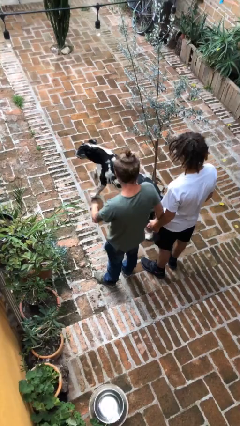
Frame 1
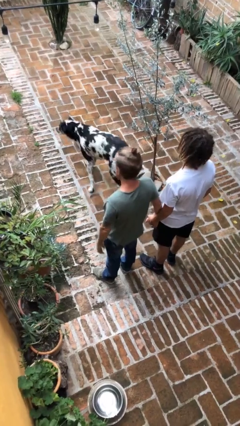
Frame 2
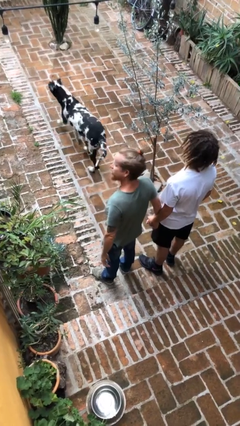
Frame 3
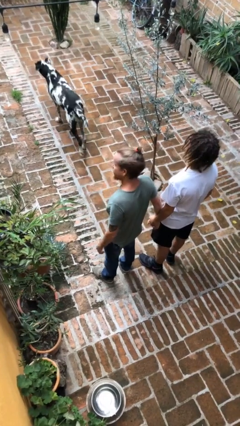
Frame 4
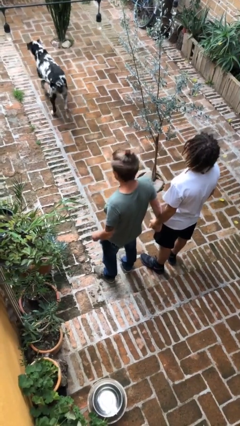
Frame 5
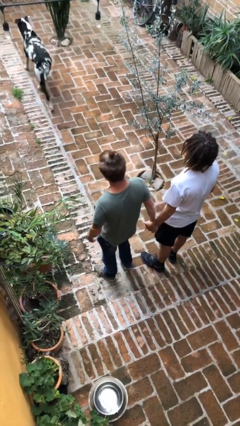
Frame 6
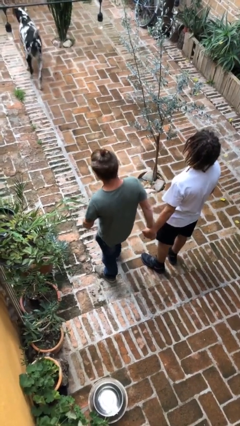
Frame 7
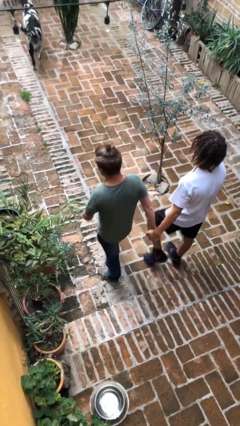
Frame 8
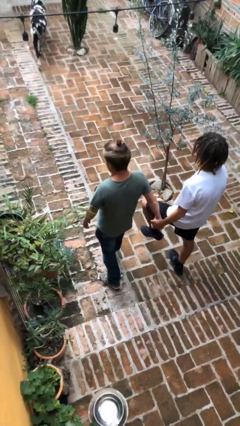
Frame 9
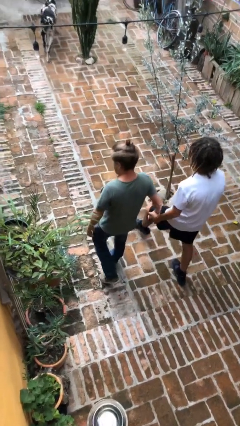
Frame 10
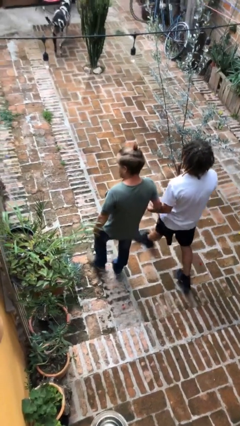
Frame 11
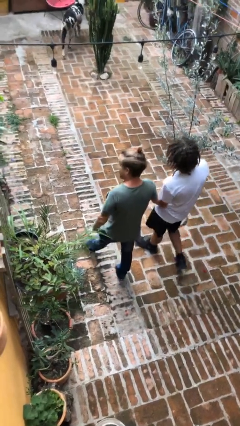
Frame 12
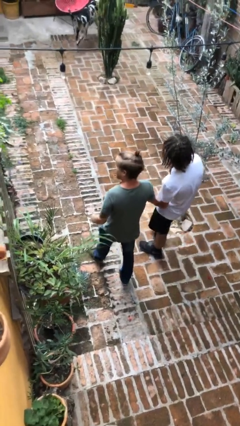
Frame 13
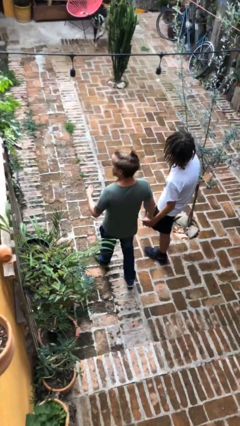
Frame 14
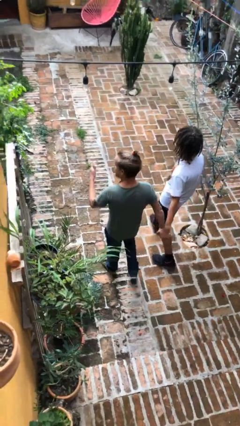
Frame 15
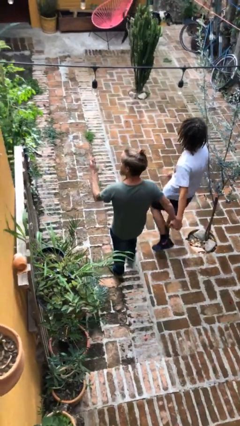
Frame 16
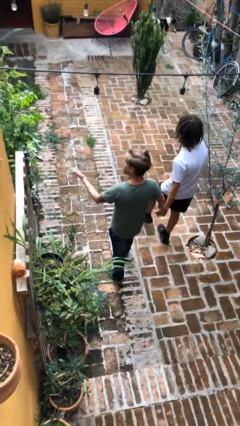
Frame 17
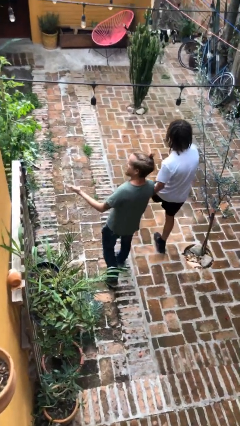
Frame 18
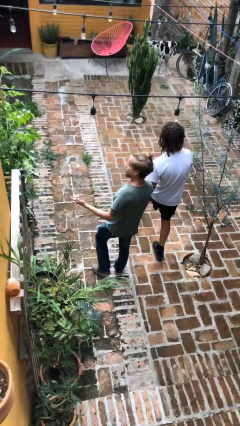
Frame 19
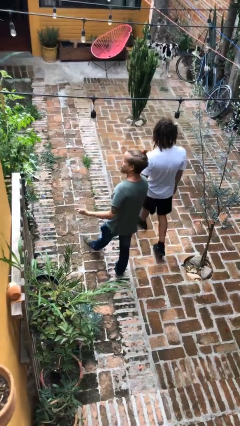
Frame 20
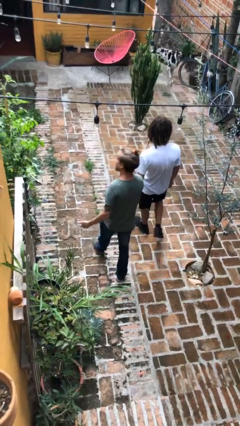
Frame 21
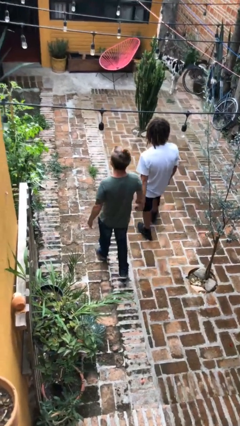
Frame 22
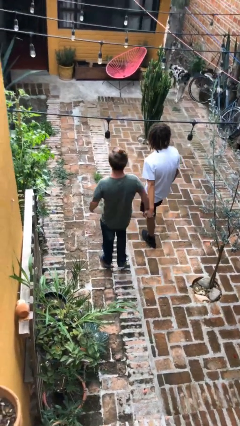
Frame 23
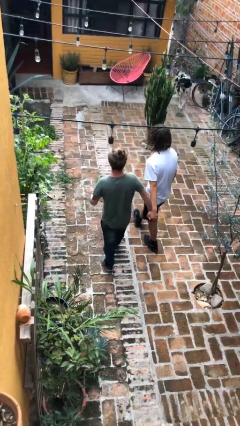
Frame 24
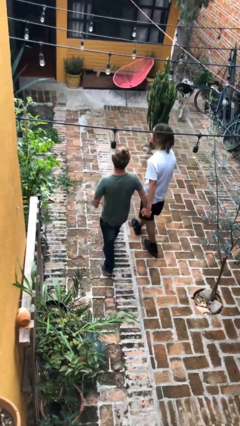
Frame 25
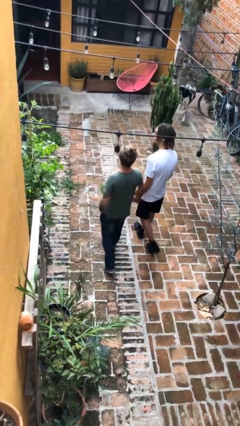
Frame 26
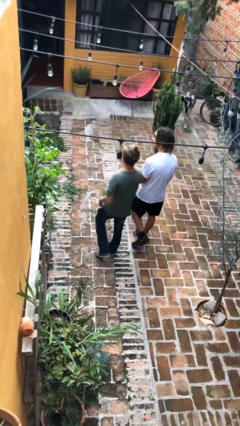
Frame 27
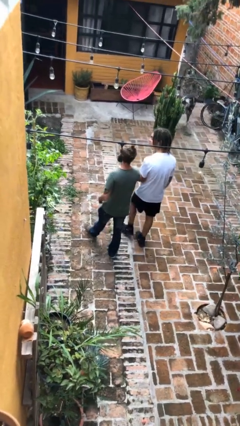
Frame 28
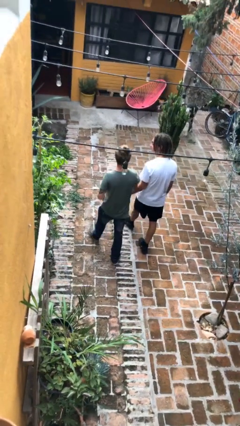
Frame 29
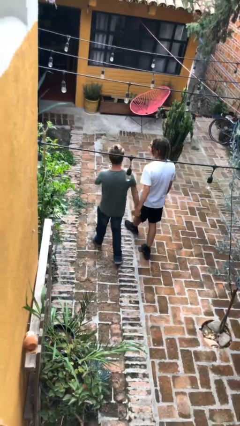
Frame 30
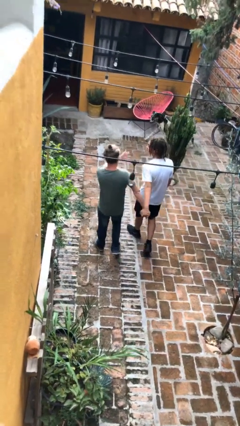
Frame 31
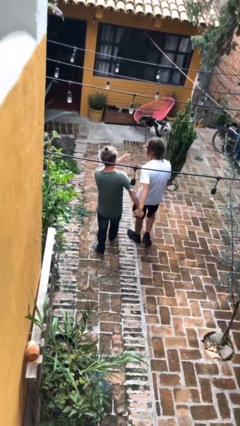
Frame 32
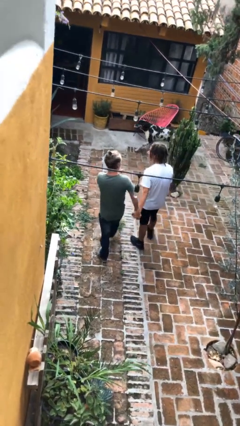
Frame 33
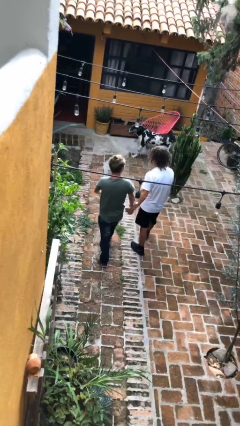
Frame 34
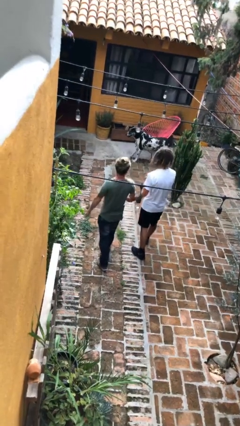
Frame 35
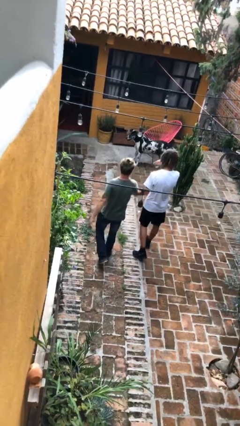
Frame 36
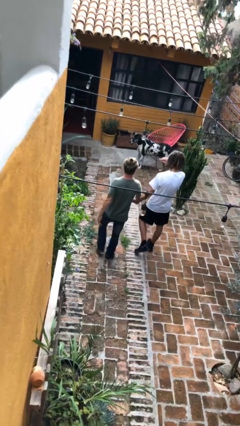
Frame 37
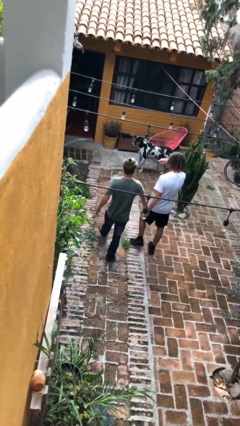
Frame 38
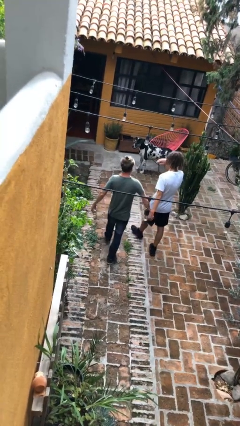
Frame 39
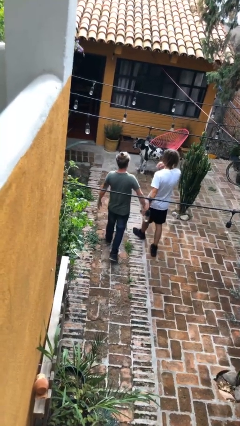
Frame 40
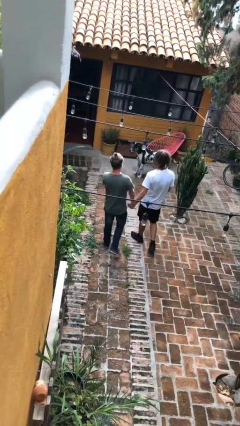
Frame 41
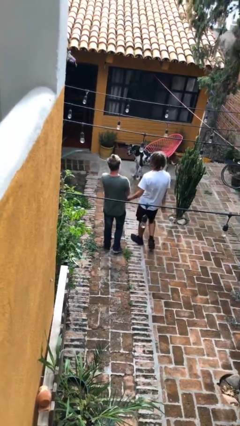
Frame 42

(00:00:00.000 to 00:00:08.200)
person holds hand

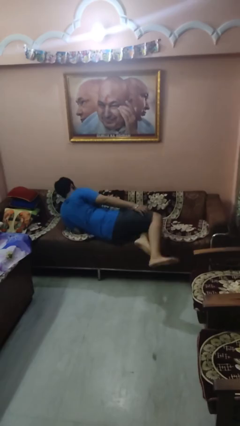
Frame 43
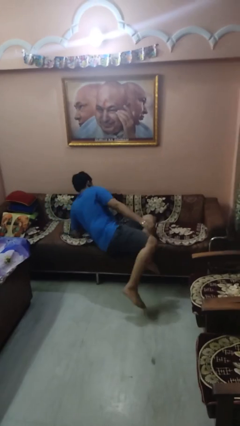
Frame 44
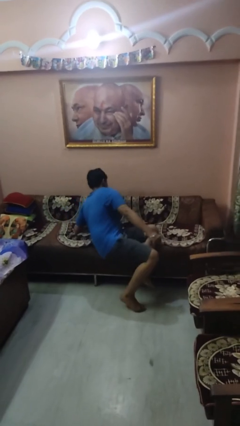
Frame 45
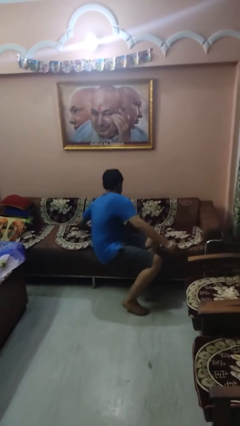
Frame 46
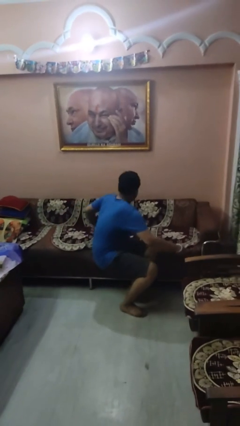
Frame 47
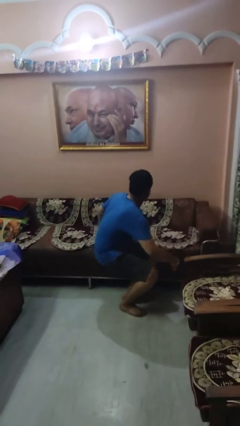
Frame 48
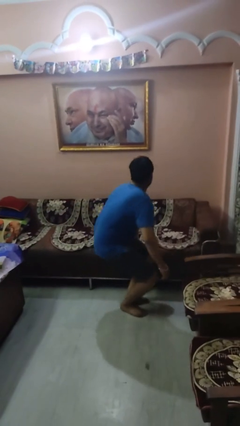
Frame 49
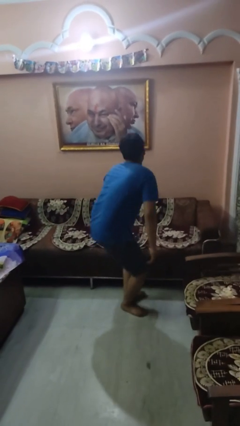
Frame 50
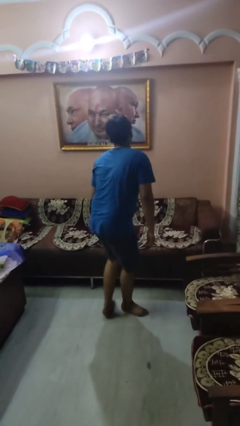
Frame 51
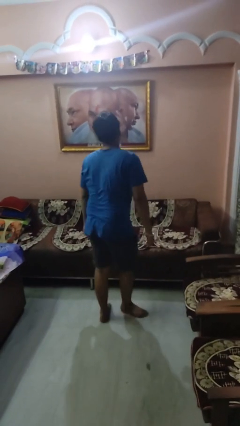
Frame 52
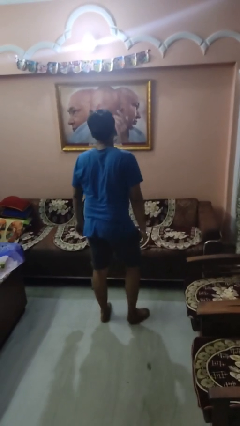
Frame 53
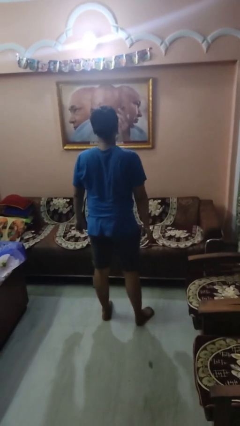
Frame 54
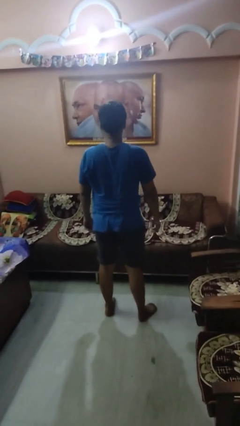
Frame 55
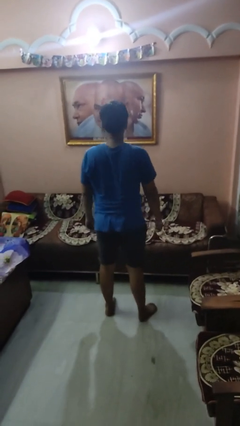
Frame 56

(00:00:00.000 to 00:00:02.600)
person stands up

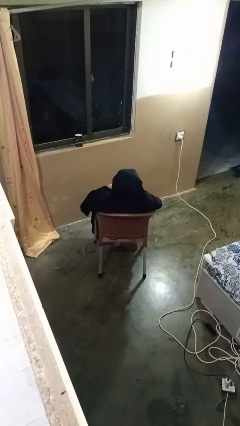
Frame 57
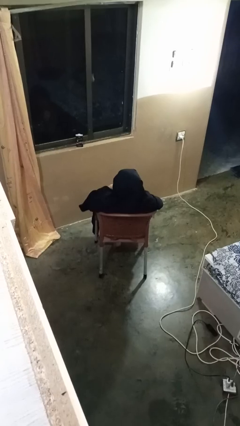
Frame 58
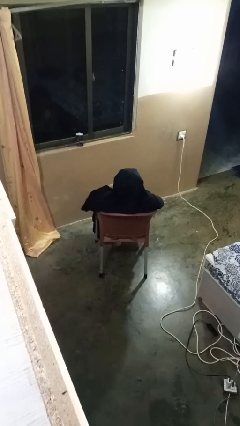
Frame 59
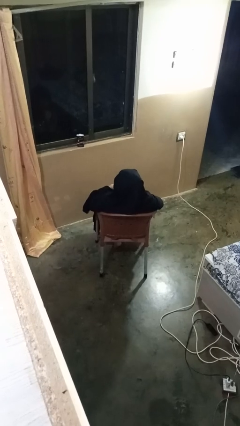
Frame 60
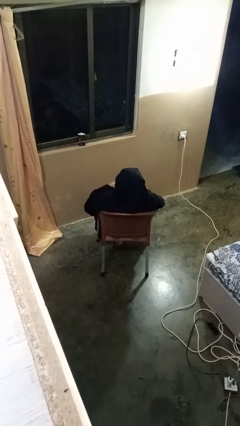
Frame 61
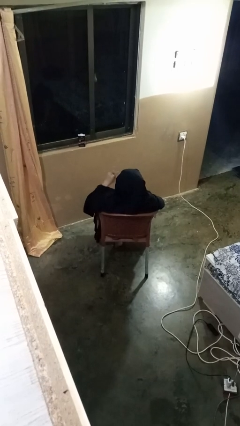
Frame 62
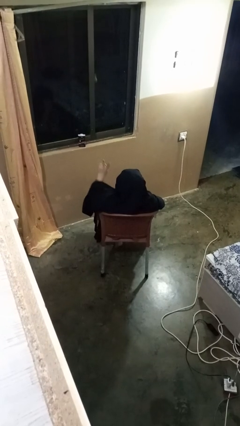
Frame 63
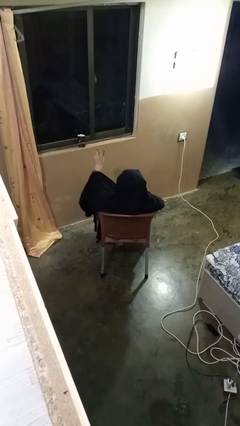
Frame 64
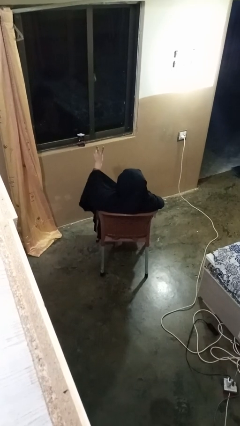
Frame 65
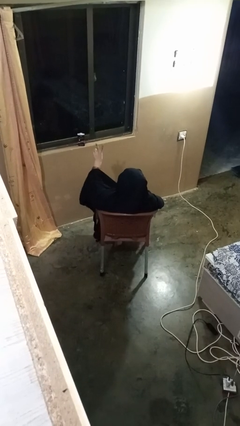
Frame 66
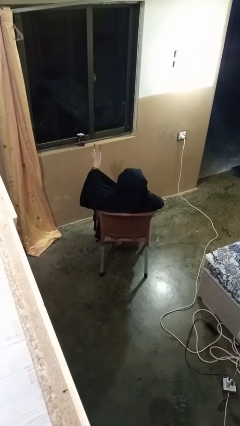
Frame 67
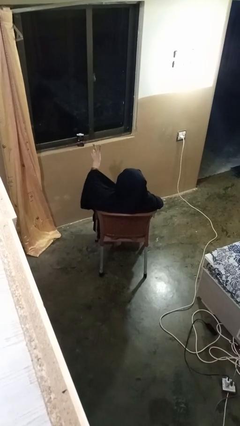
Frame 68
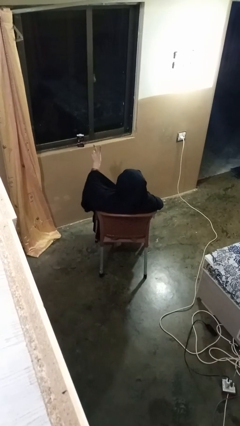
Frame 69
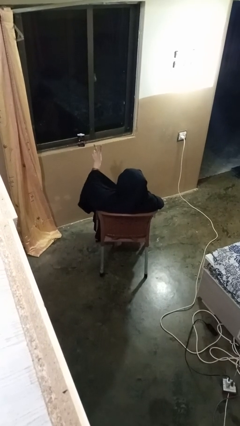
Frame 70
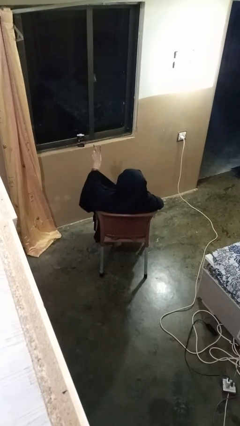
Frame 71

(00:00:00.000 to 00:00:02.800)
person gestures peace

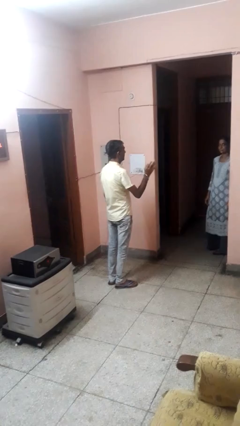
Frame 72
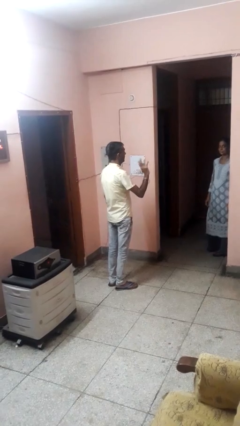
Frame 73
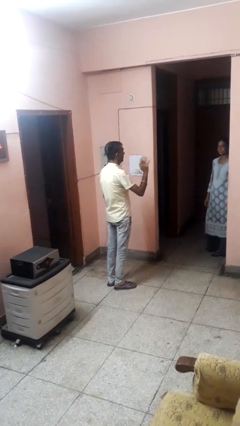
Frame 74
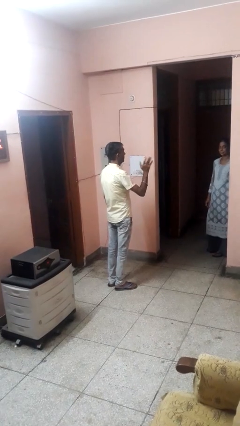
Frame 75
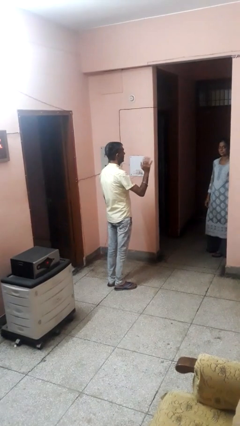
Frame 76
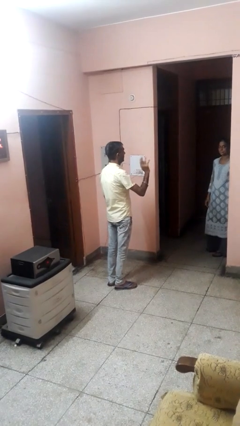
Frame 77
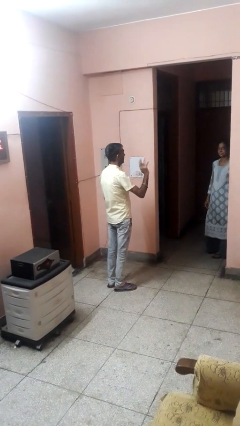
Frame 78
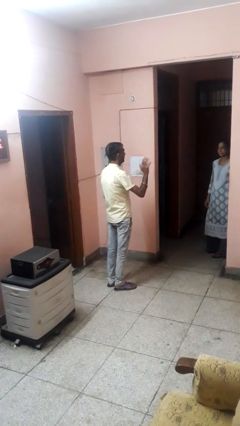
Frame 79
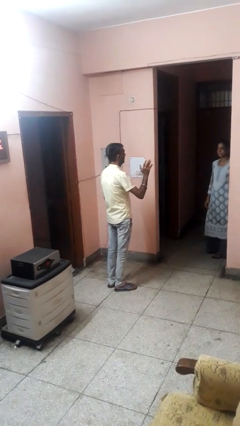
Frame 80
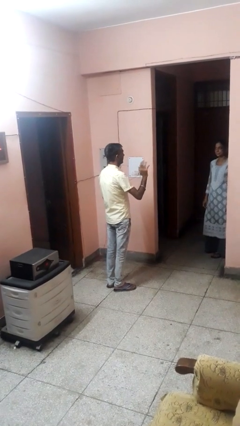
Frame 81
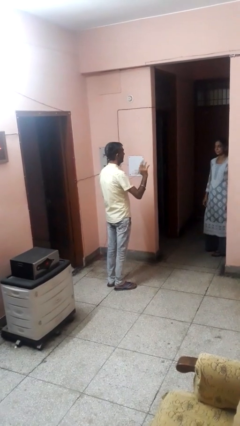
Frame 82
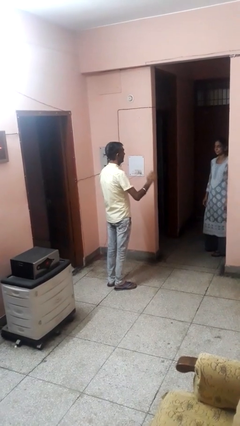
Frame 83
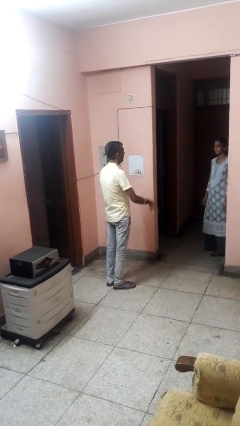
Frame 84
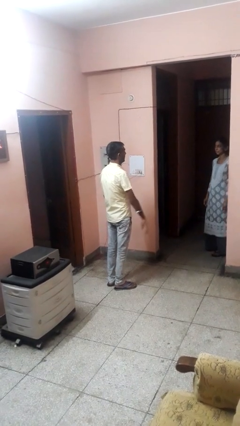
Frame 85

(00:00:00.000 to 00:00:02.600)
person waves at person

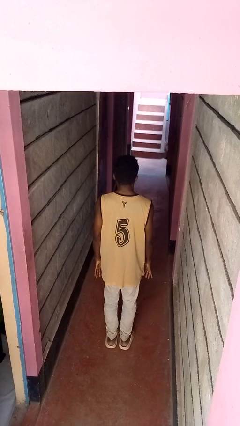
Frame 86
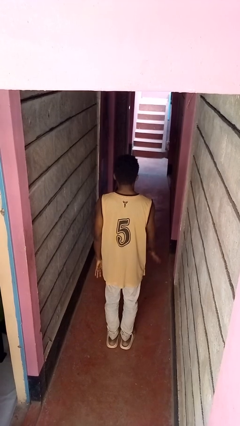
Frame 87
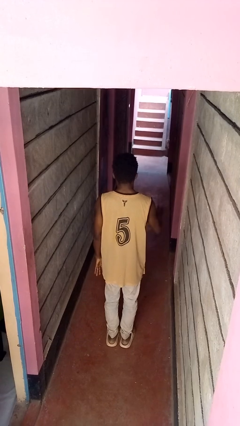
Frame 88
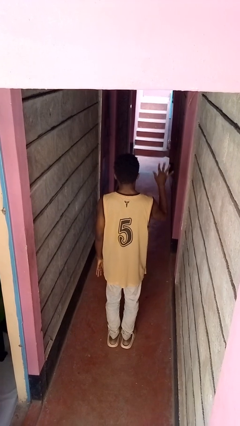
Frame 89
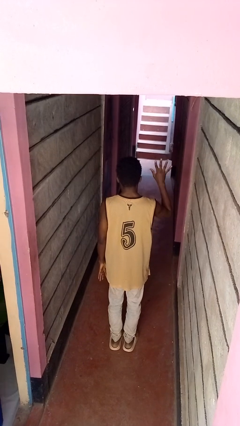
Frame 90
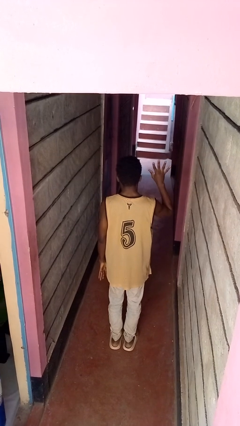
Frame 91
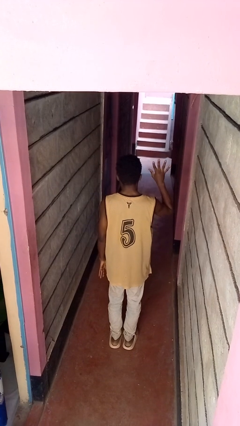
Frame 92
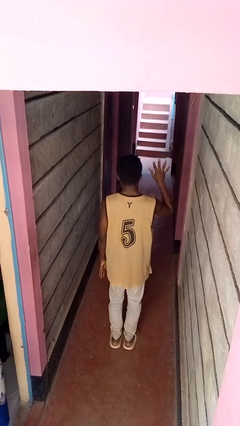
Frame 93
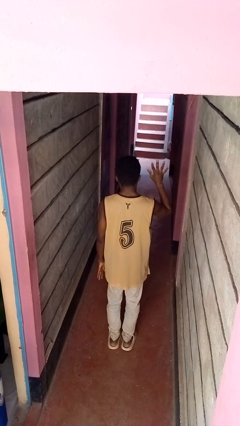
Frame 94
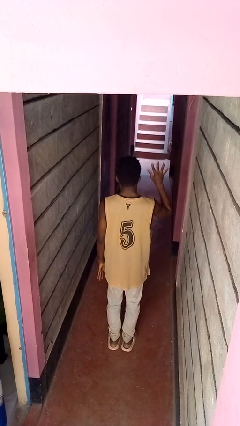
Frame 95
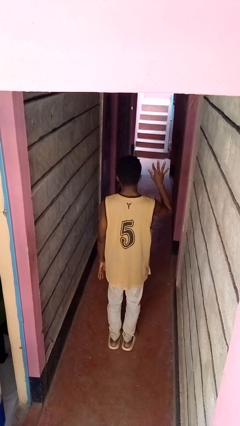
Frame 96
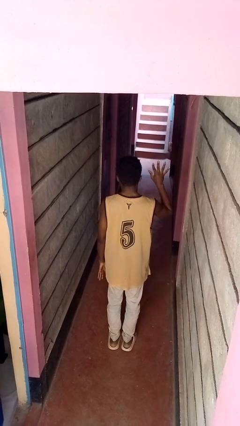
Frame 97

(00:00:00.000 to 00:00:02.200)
person gestures number five
